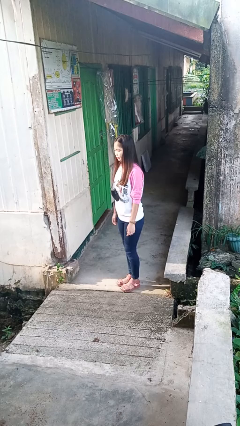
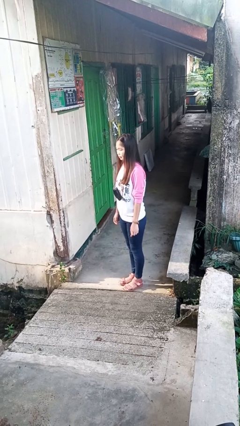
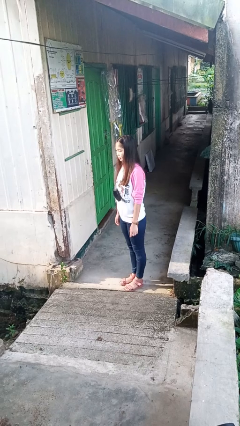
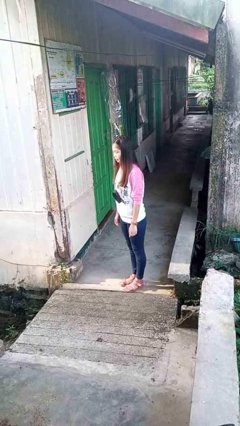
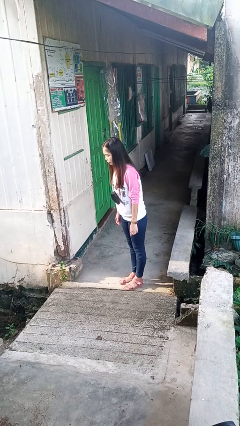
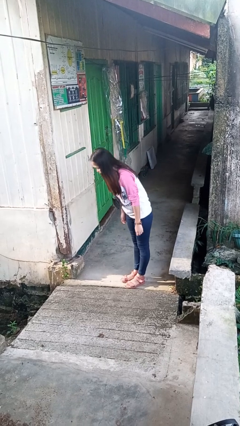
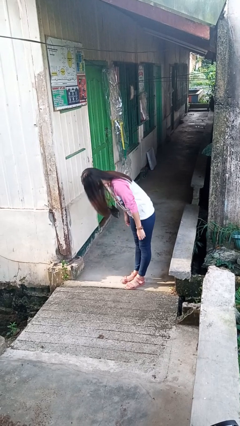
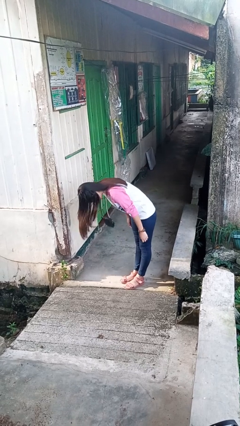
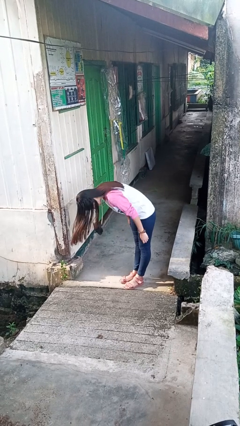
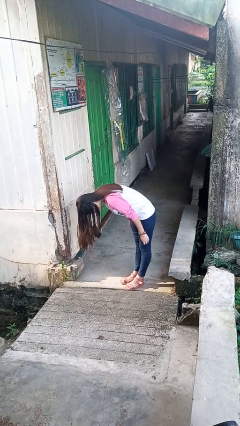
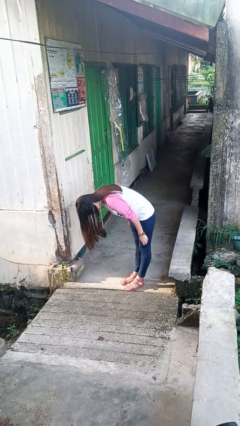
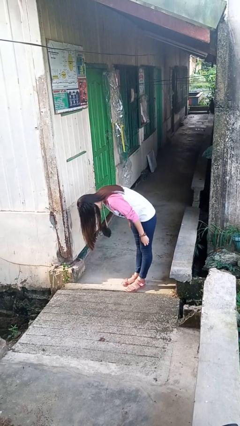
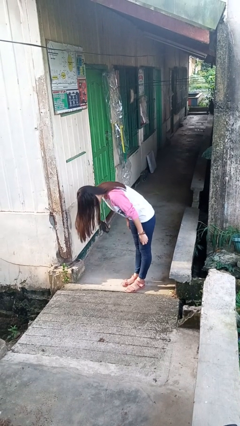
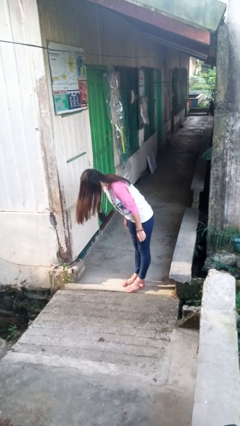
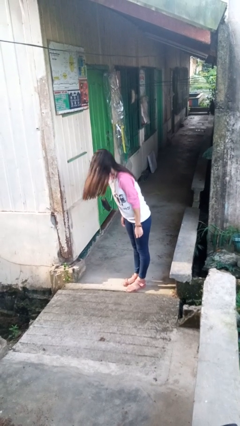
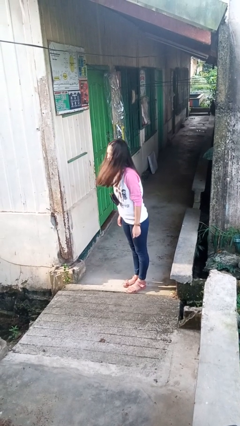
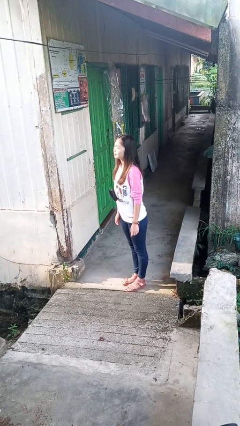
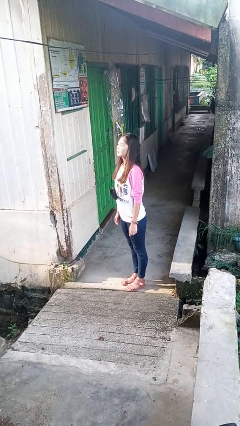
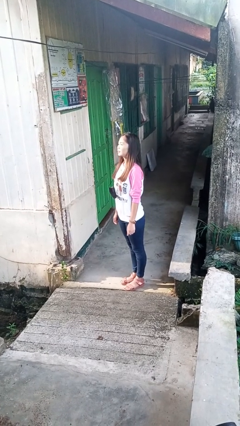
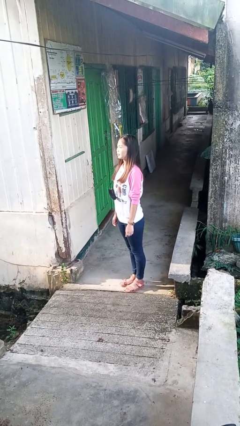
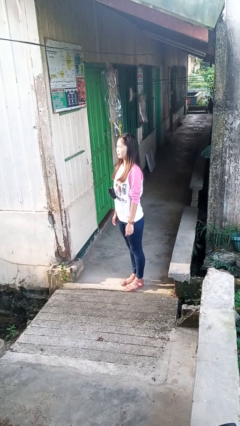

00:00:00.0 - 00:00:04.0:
person bows

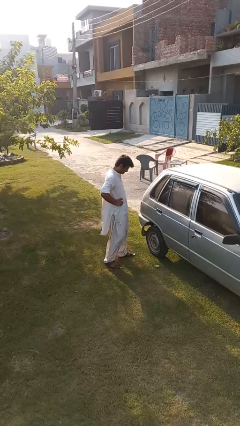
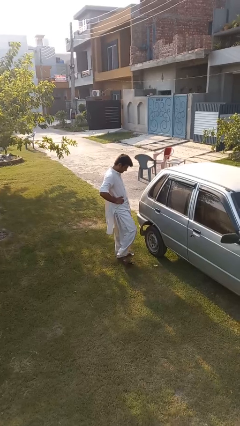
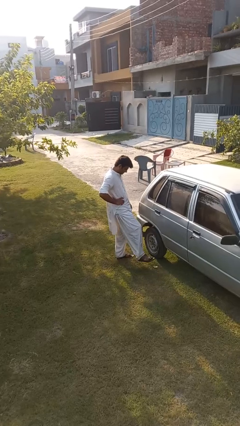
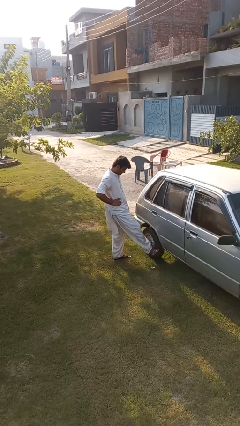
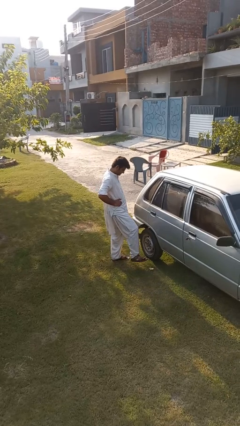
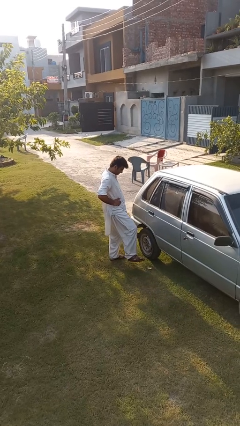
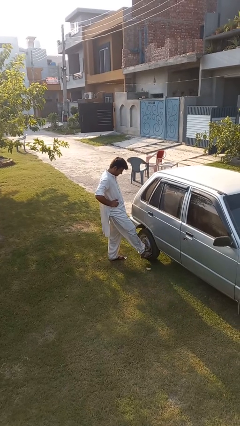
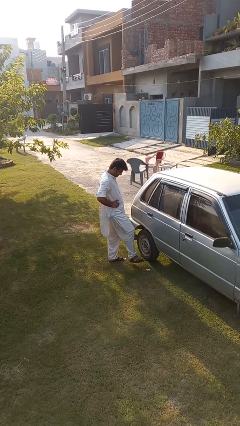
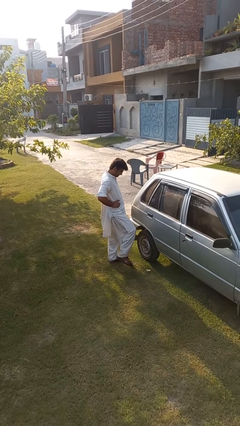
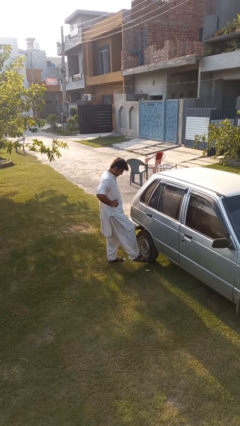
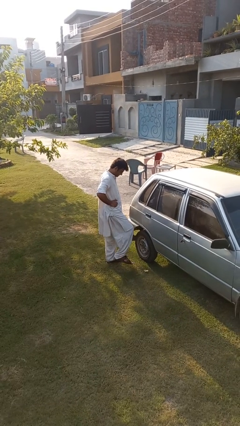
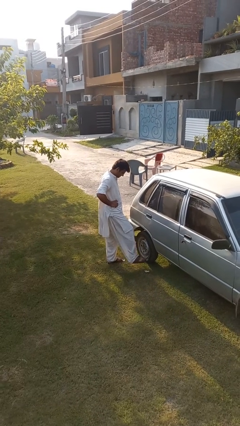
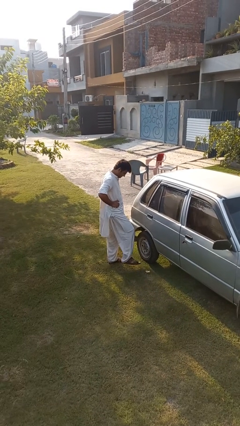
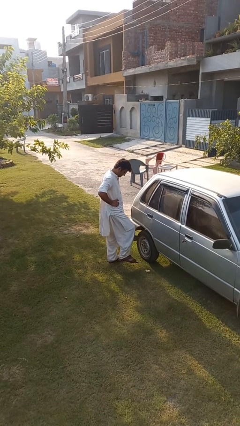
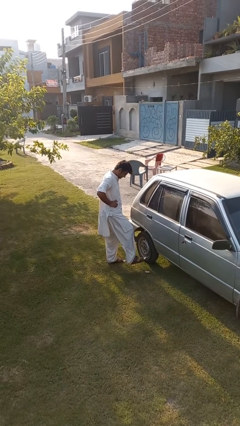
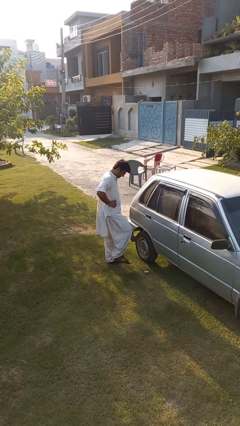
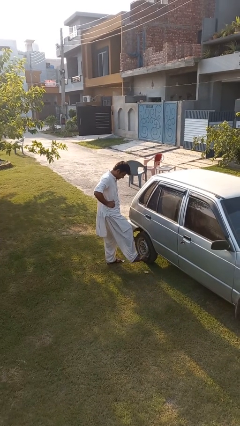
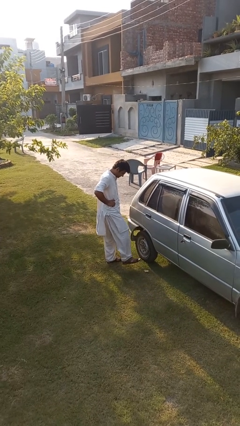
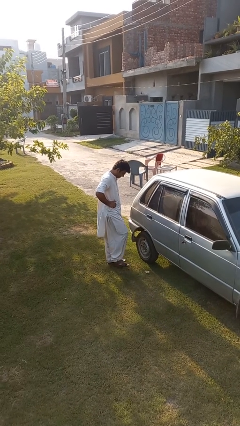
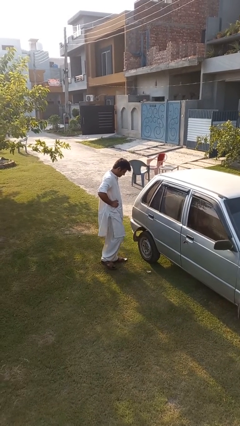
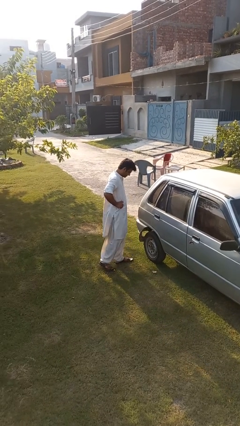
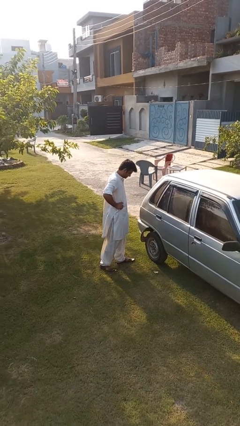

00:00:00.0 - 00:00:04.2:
person kicks car tires

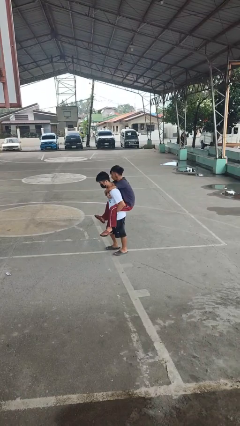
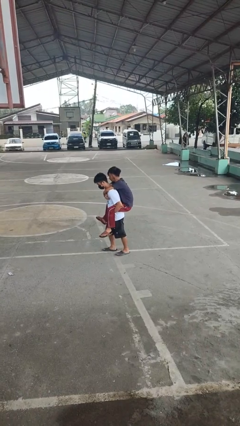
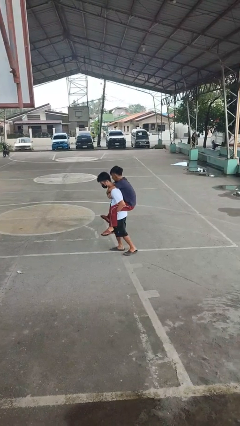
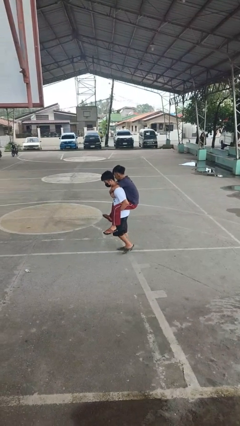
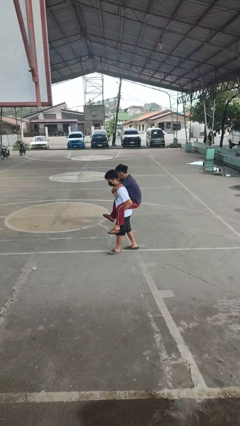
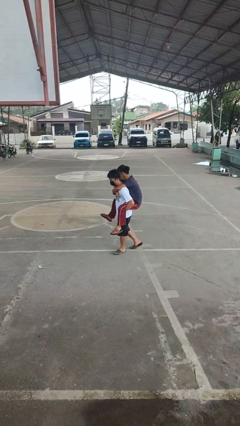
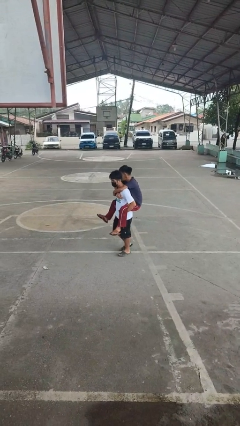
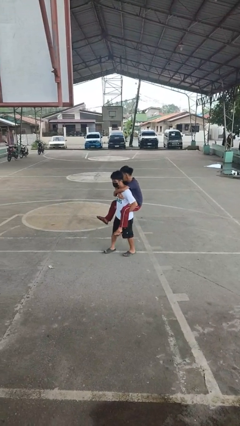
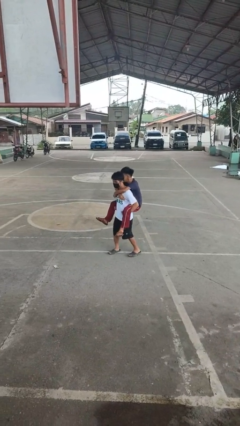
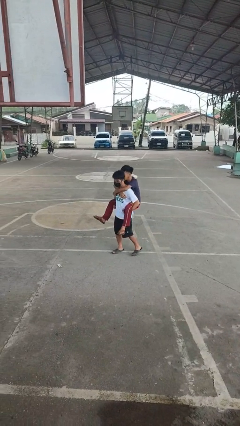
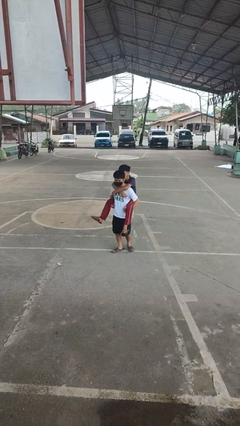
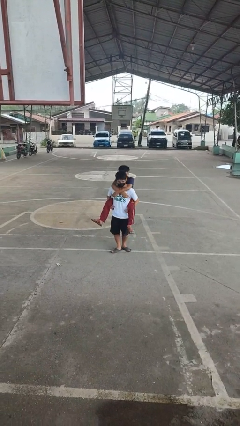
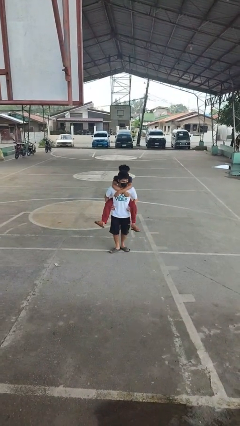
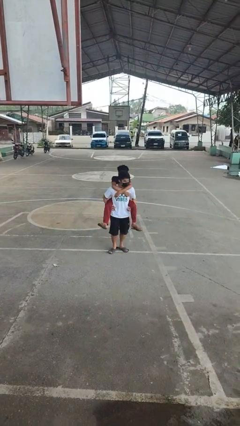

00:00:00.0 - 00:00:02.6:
person carries person on back

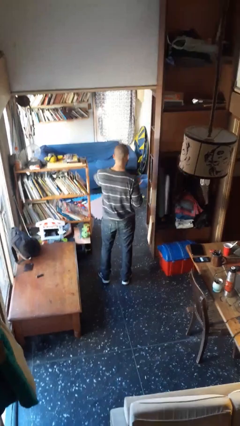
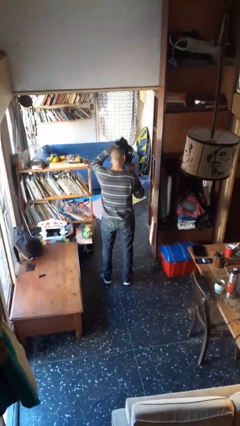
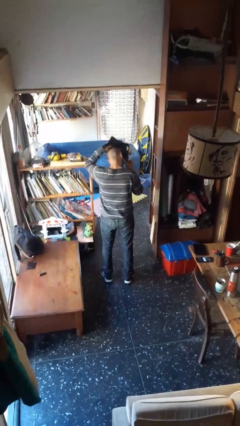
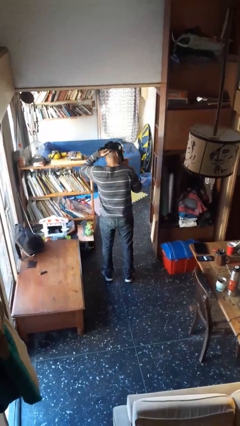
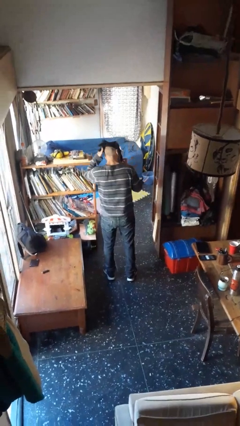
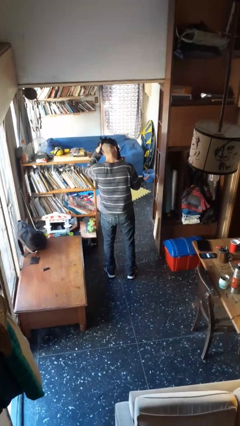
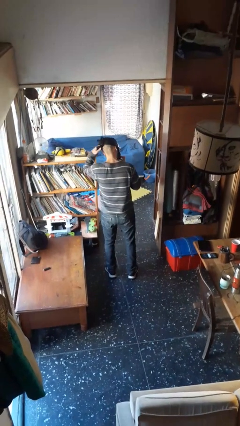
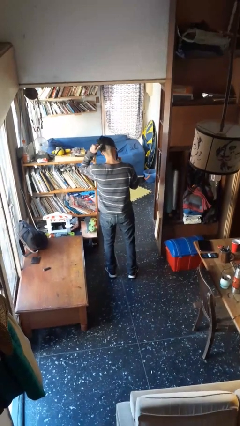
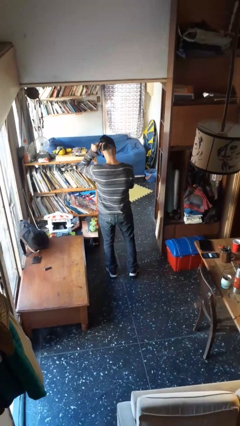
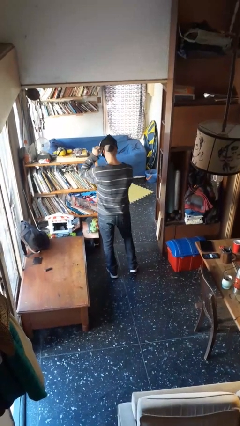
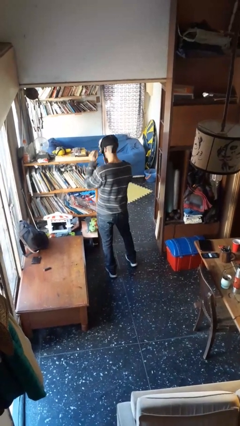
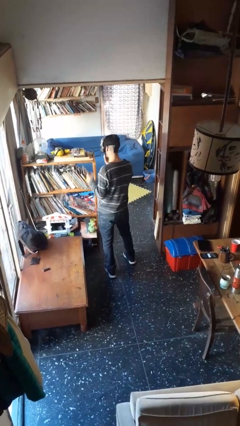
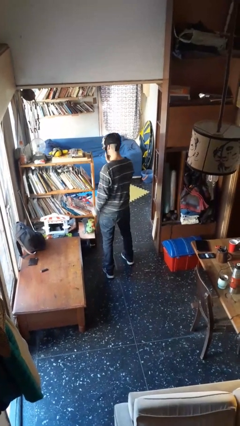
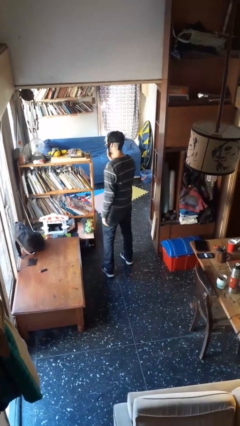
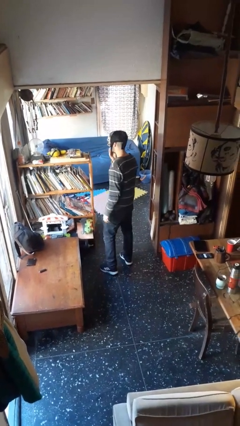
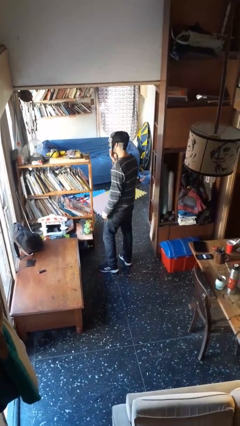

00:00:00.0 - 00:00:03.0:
person puts on facemask

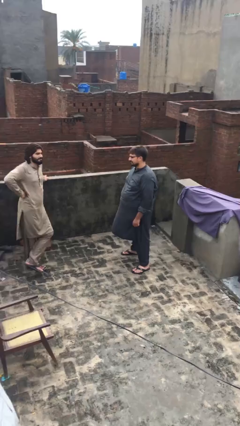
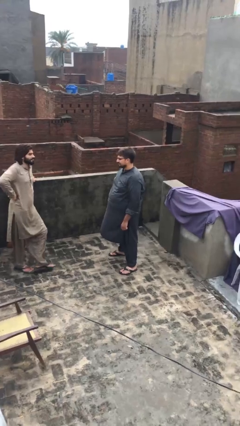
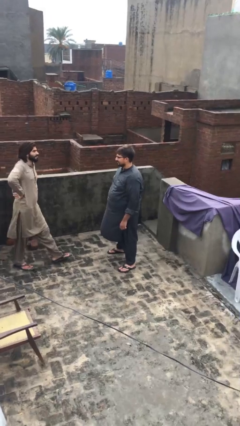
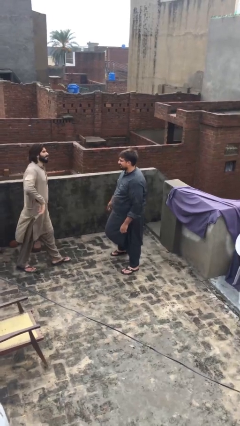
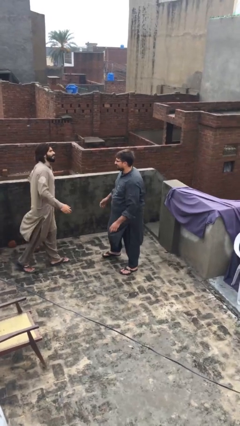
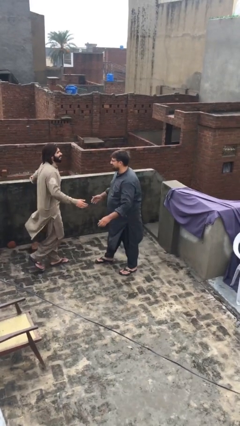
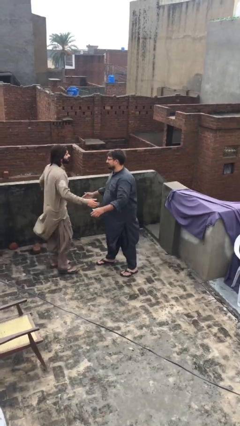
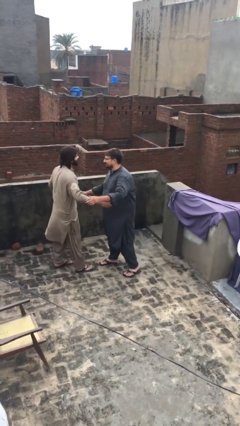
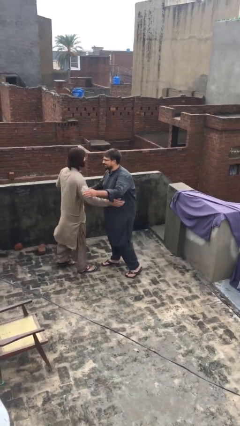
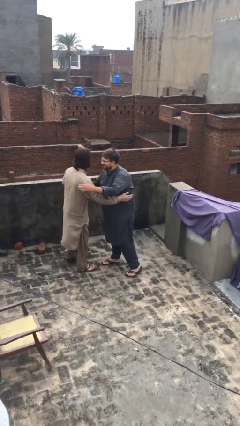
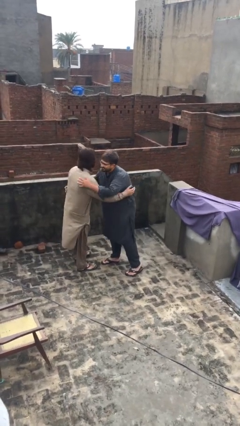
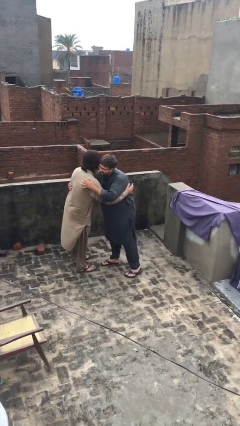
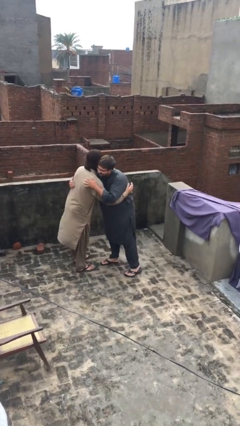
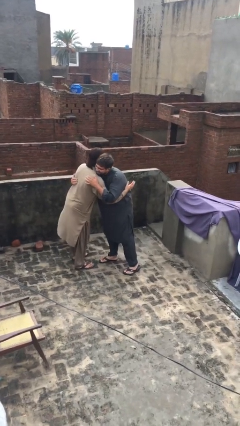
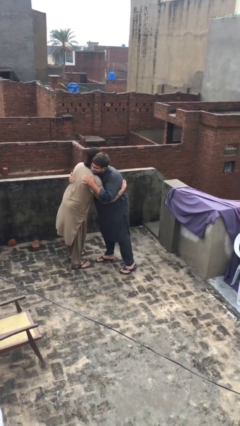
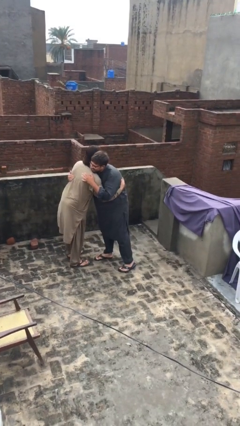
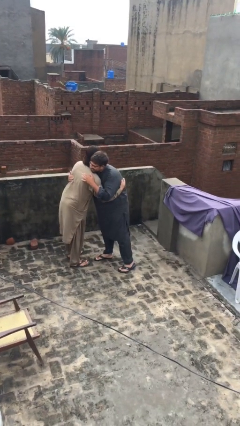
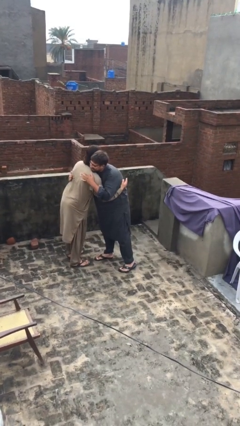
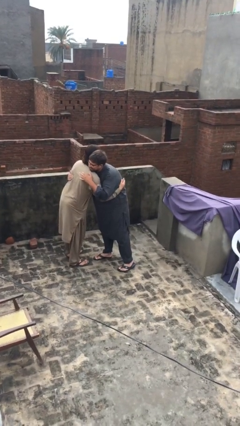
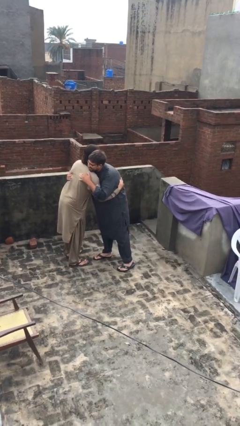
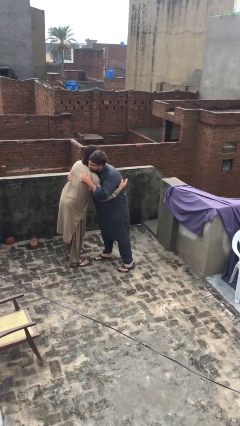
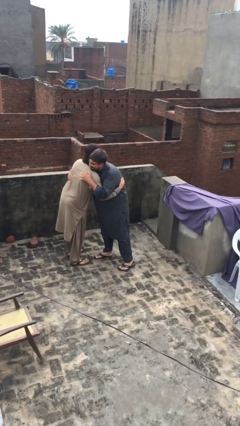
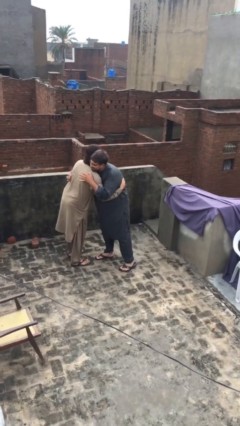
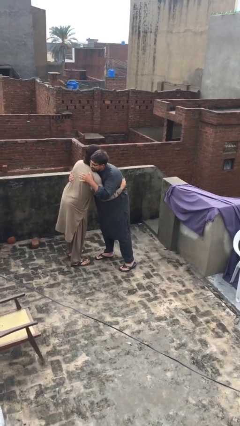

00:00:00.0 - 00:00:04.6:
person embraces person
